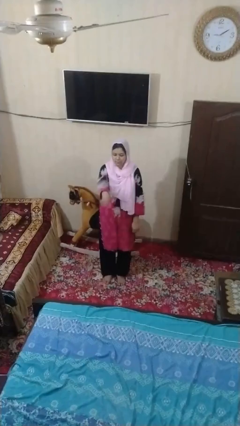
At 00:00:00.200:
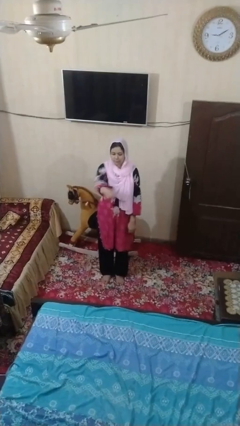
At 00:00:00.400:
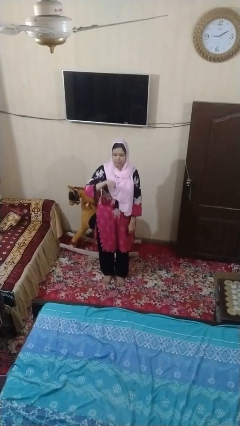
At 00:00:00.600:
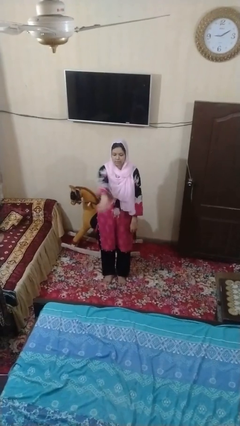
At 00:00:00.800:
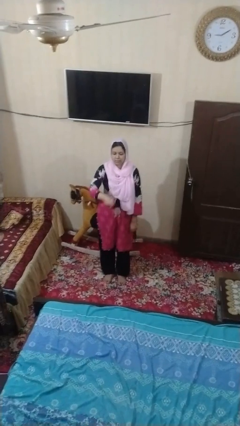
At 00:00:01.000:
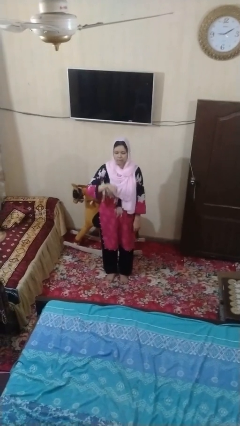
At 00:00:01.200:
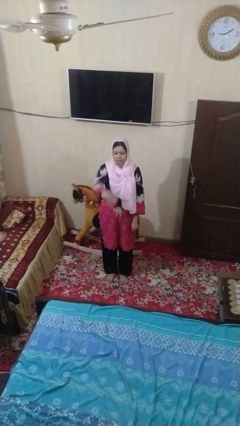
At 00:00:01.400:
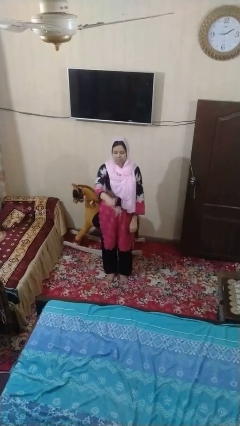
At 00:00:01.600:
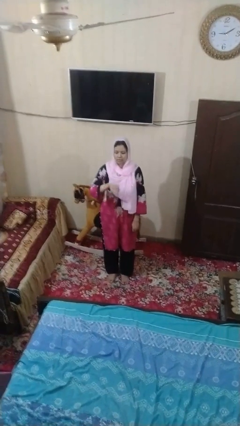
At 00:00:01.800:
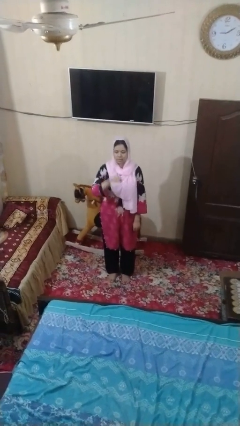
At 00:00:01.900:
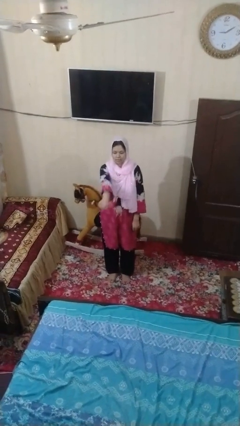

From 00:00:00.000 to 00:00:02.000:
person punches

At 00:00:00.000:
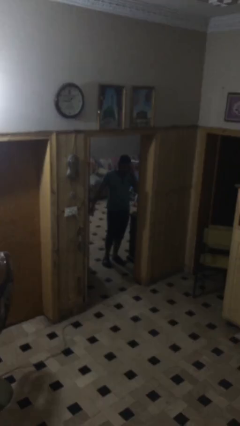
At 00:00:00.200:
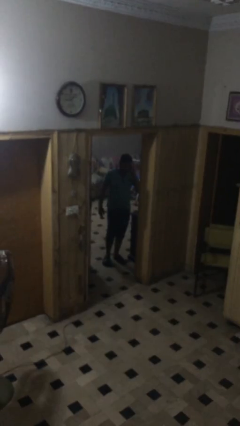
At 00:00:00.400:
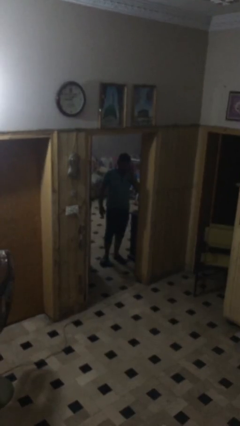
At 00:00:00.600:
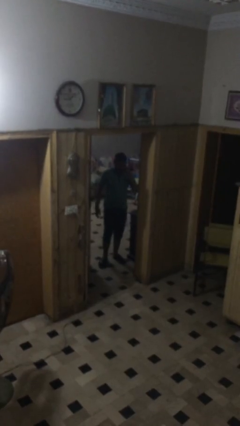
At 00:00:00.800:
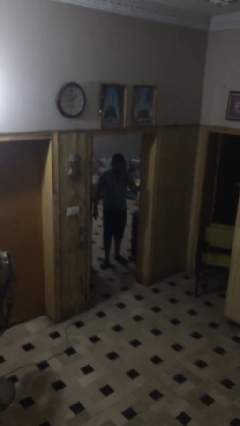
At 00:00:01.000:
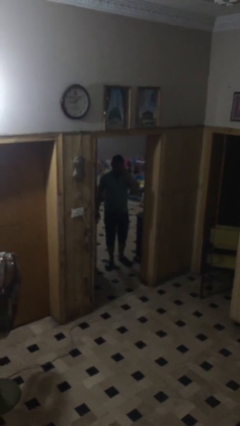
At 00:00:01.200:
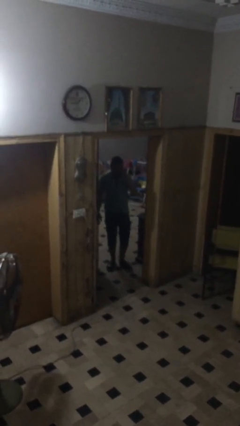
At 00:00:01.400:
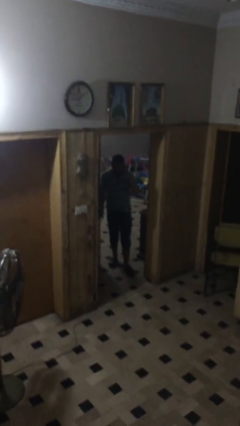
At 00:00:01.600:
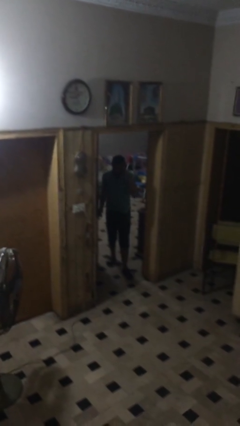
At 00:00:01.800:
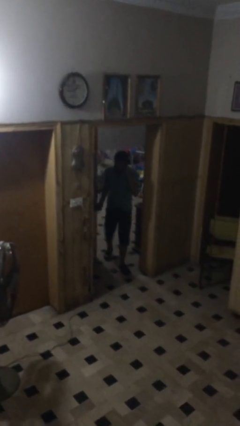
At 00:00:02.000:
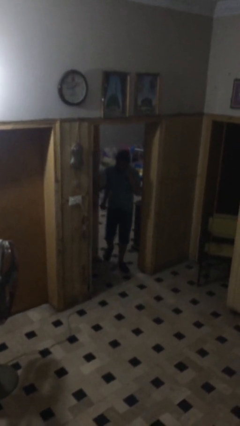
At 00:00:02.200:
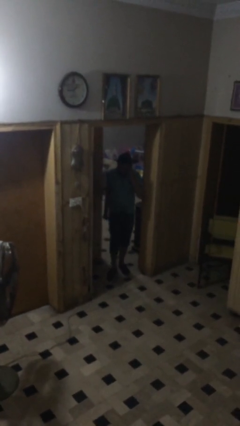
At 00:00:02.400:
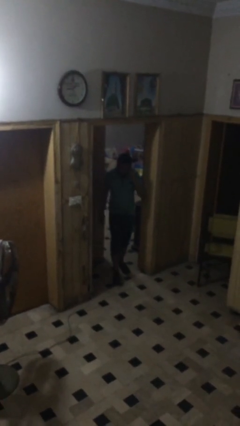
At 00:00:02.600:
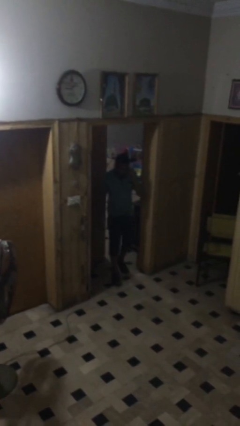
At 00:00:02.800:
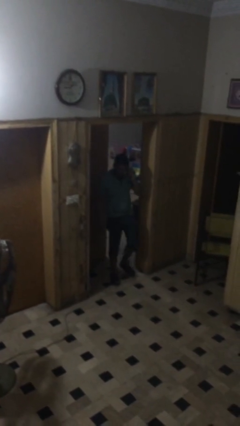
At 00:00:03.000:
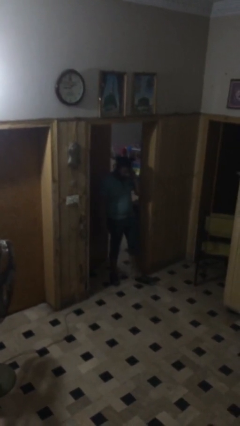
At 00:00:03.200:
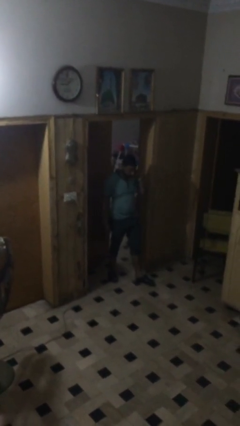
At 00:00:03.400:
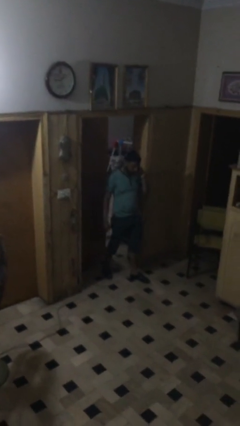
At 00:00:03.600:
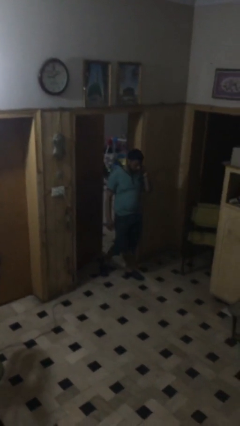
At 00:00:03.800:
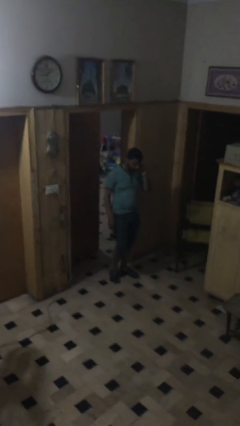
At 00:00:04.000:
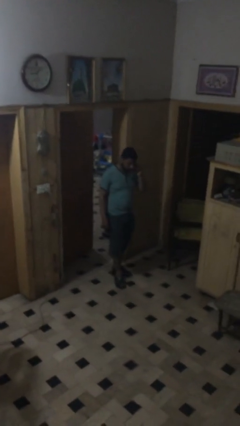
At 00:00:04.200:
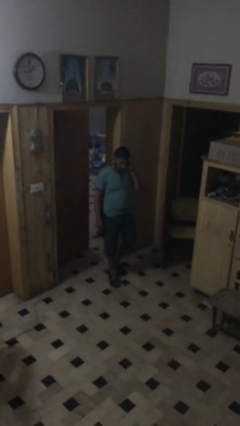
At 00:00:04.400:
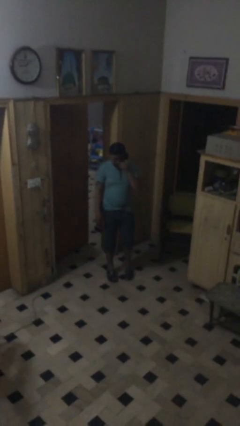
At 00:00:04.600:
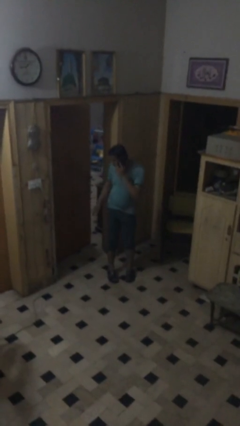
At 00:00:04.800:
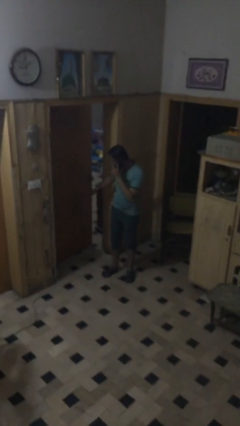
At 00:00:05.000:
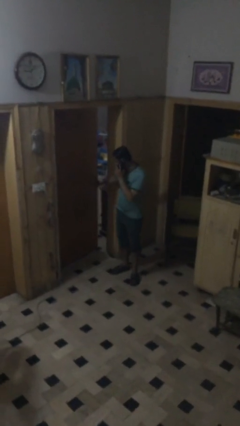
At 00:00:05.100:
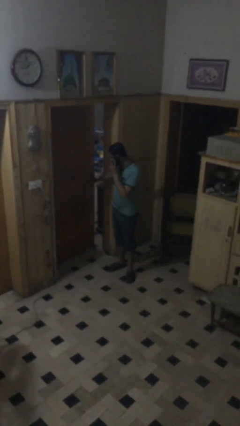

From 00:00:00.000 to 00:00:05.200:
person enters scene through structure

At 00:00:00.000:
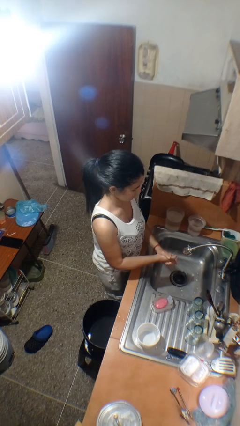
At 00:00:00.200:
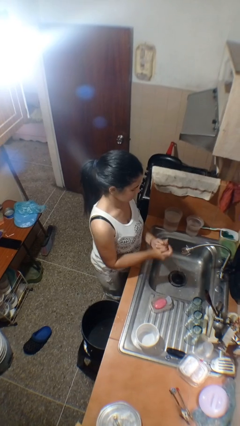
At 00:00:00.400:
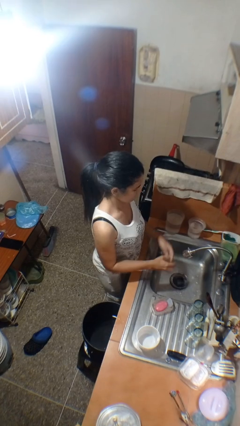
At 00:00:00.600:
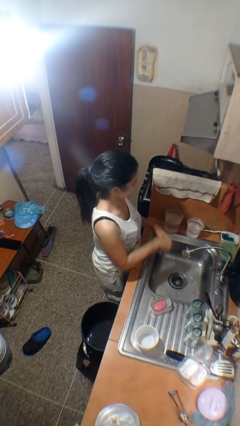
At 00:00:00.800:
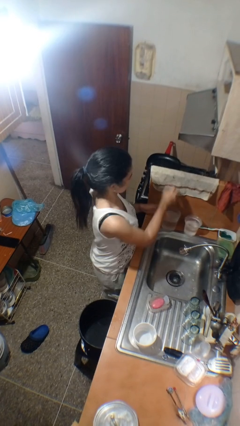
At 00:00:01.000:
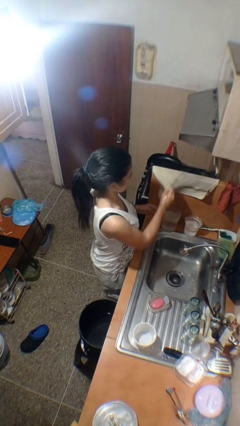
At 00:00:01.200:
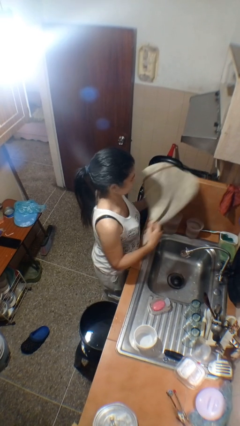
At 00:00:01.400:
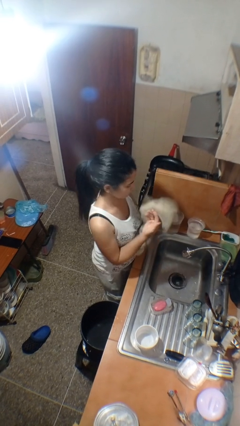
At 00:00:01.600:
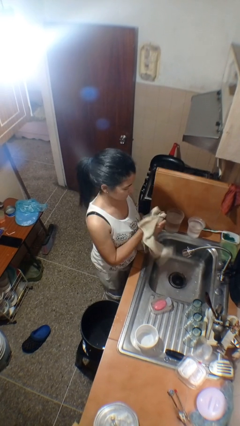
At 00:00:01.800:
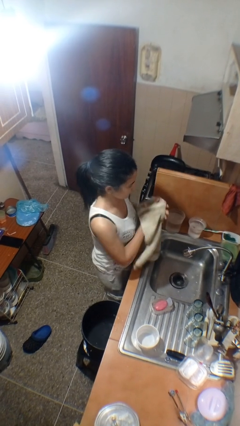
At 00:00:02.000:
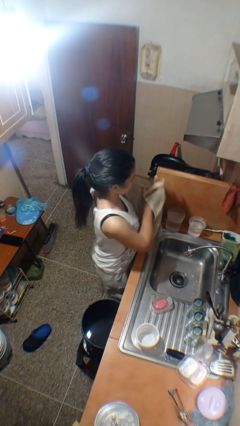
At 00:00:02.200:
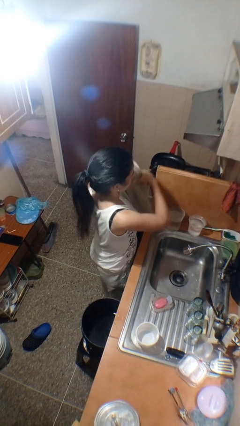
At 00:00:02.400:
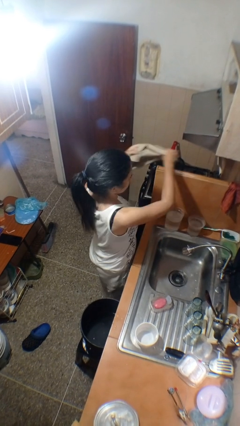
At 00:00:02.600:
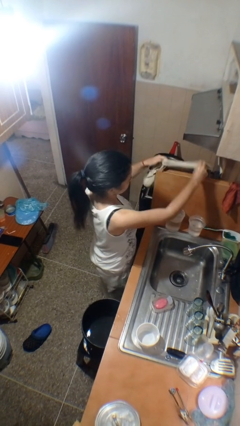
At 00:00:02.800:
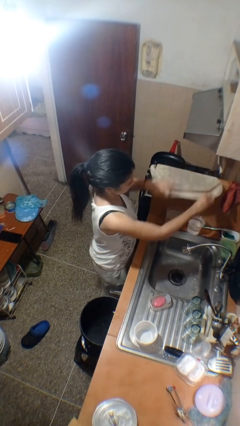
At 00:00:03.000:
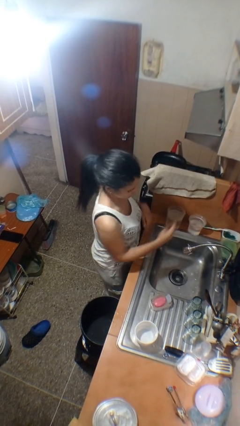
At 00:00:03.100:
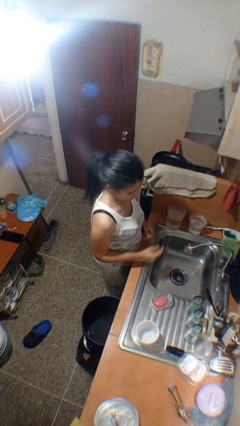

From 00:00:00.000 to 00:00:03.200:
person dries hands with towel

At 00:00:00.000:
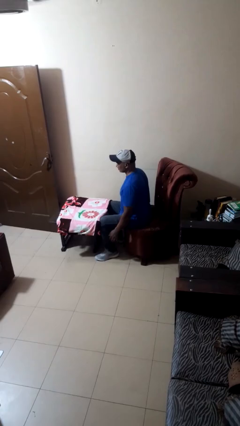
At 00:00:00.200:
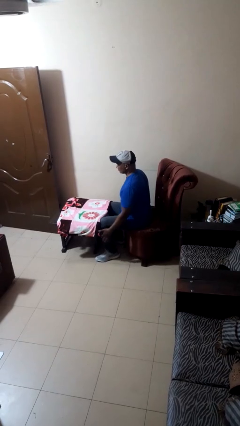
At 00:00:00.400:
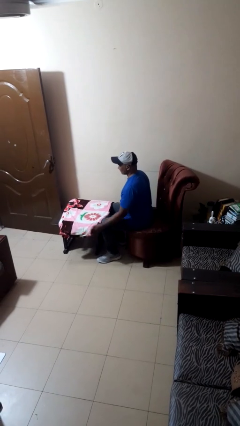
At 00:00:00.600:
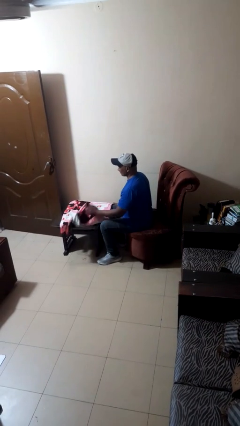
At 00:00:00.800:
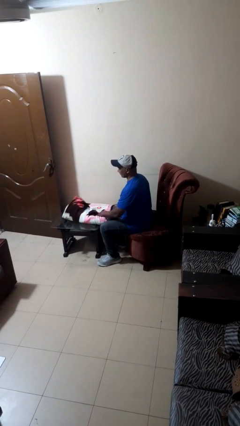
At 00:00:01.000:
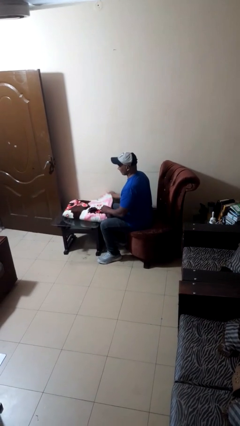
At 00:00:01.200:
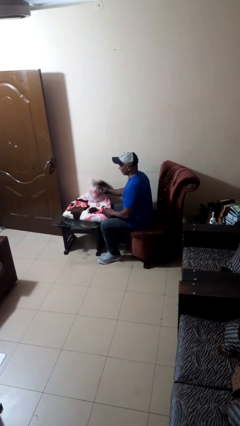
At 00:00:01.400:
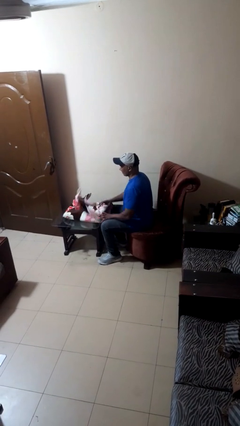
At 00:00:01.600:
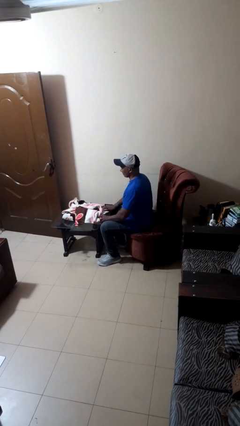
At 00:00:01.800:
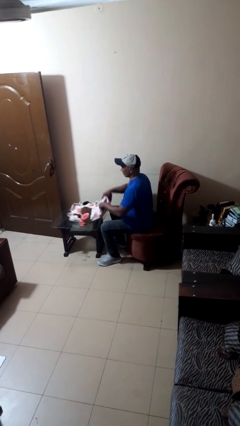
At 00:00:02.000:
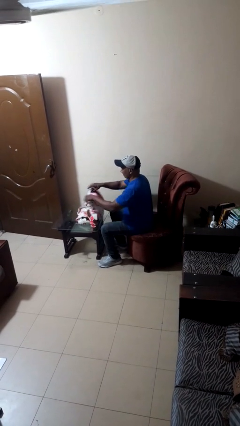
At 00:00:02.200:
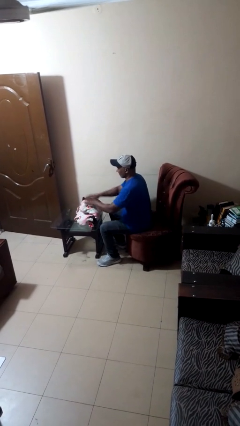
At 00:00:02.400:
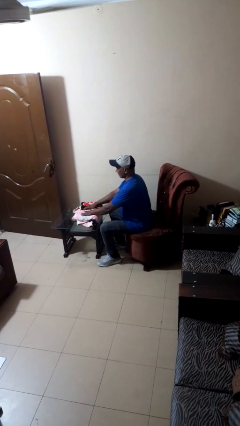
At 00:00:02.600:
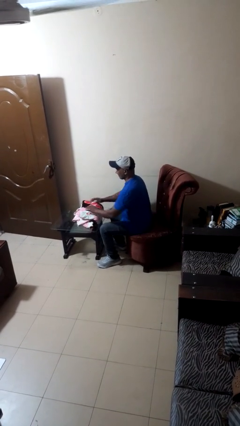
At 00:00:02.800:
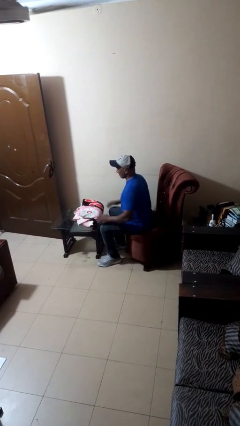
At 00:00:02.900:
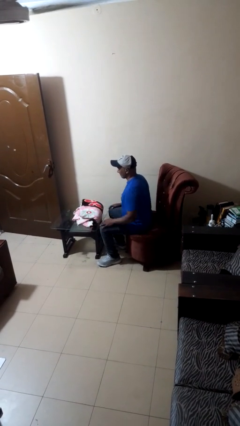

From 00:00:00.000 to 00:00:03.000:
person folds blanket

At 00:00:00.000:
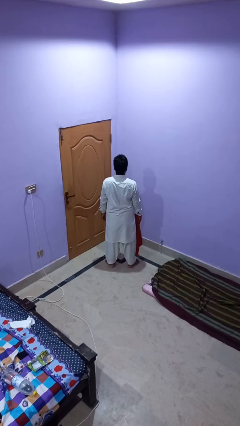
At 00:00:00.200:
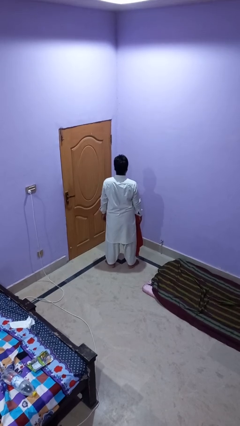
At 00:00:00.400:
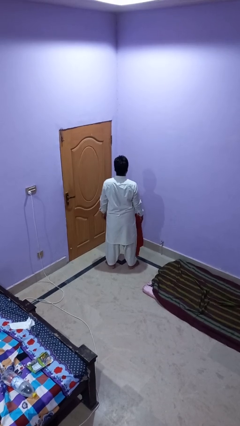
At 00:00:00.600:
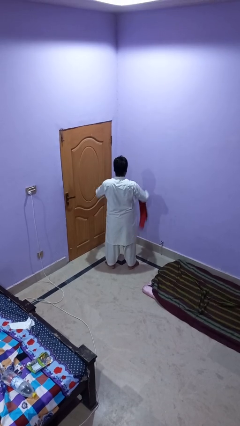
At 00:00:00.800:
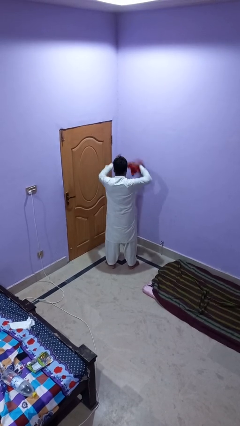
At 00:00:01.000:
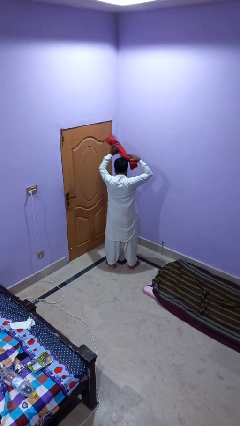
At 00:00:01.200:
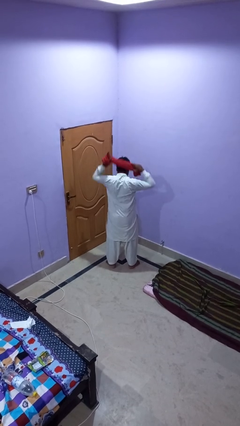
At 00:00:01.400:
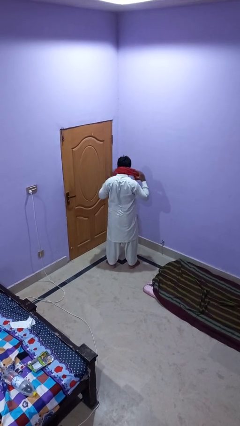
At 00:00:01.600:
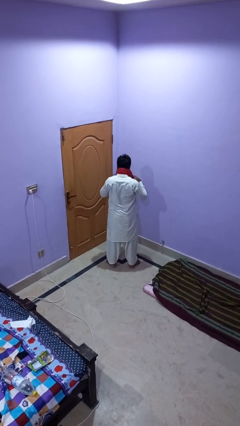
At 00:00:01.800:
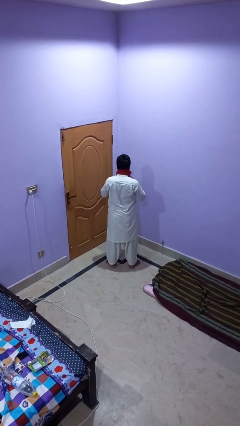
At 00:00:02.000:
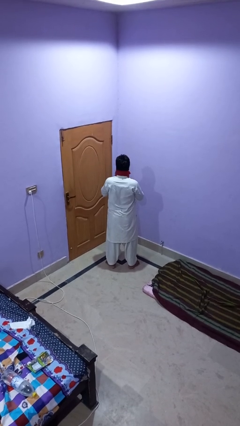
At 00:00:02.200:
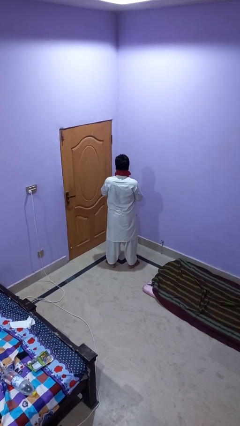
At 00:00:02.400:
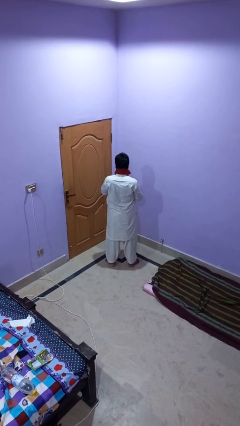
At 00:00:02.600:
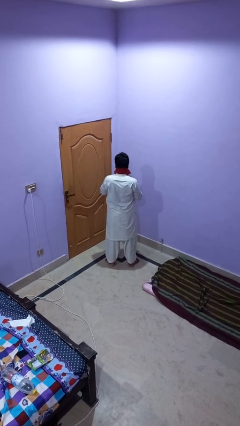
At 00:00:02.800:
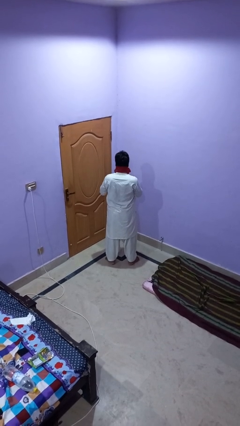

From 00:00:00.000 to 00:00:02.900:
person puts on scarf

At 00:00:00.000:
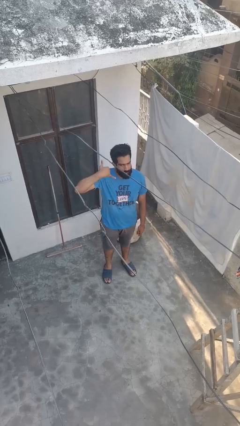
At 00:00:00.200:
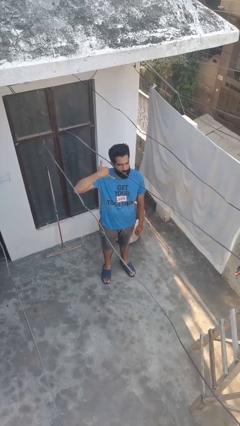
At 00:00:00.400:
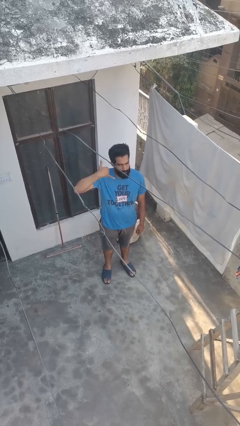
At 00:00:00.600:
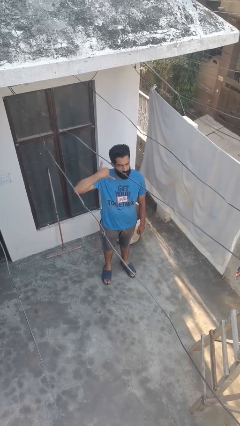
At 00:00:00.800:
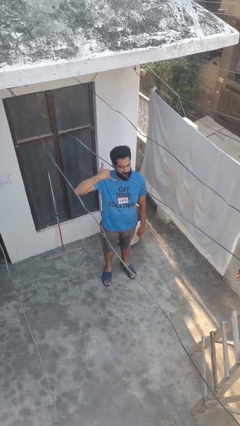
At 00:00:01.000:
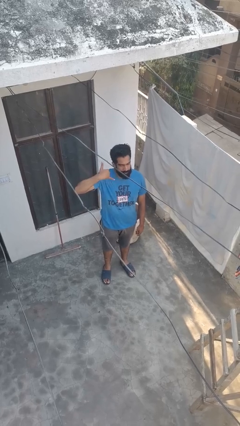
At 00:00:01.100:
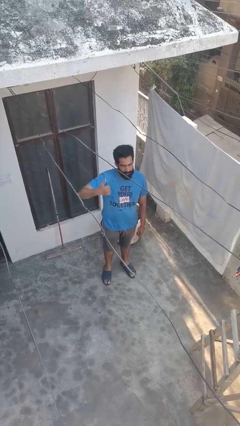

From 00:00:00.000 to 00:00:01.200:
person gestures call me
